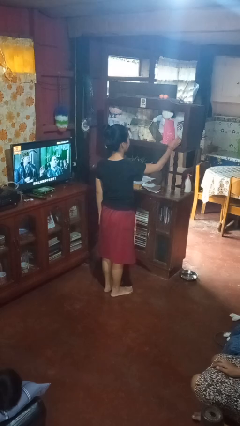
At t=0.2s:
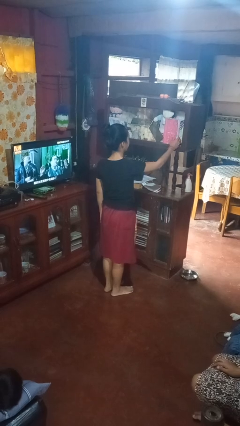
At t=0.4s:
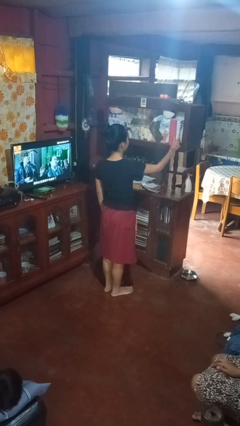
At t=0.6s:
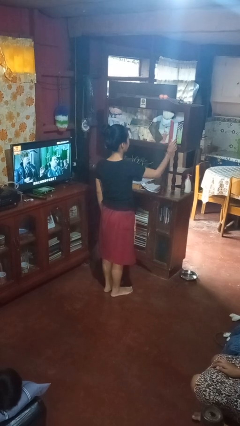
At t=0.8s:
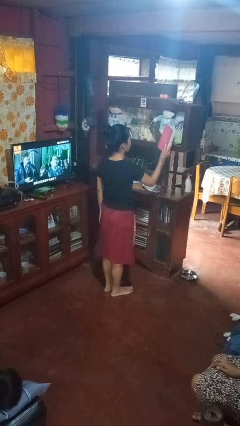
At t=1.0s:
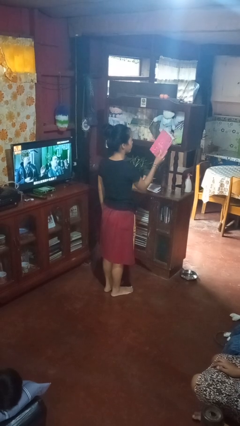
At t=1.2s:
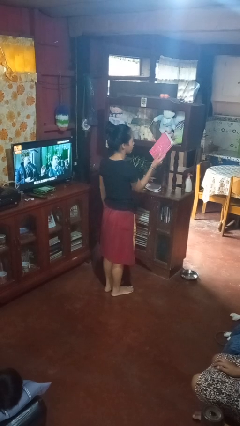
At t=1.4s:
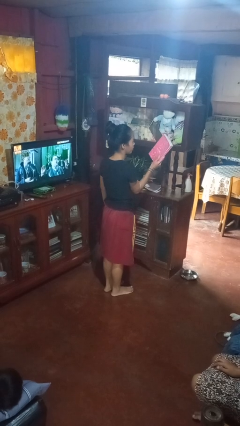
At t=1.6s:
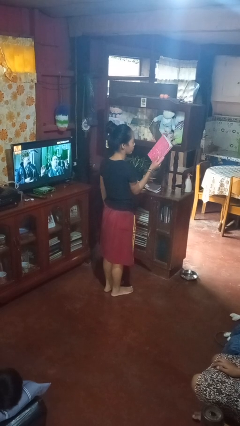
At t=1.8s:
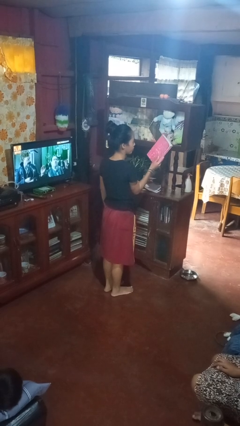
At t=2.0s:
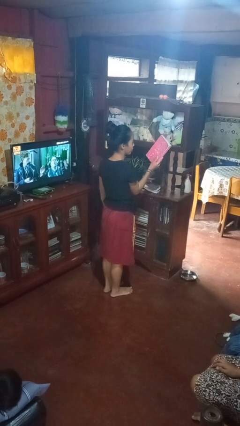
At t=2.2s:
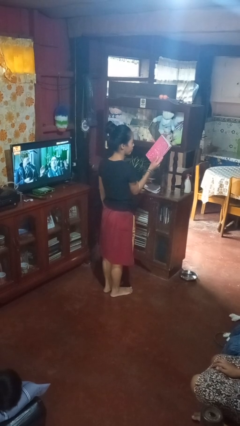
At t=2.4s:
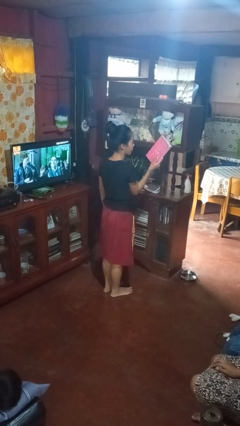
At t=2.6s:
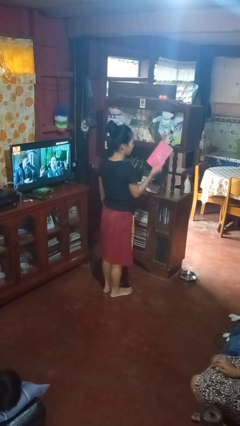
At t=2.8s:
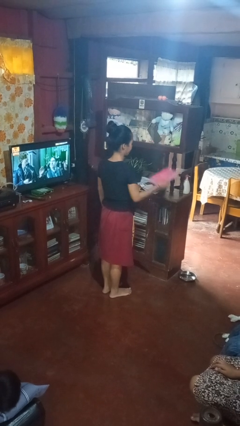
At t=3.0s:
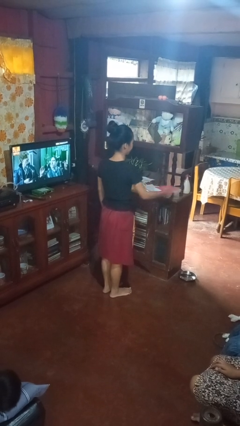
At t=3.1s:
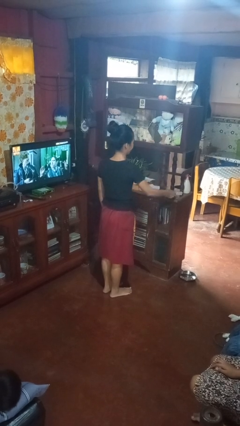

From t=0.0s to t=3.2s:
person picks up object from shelf

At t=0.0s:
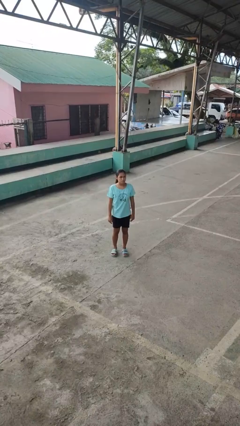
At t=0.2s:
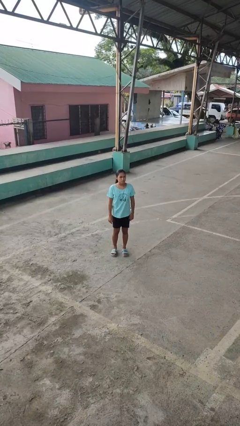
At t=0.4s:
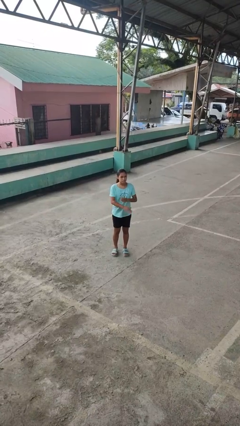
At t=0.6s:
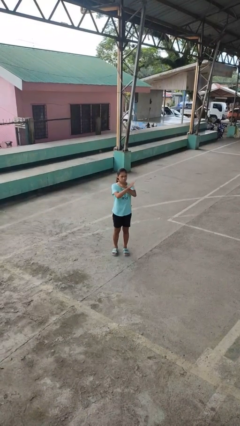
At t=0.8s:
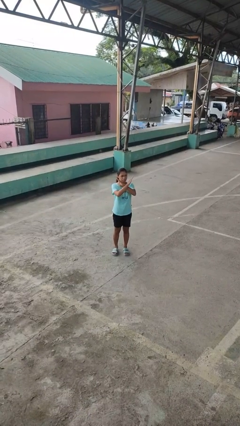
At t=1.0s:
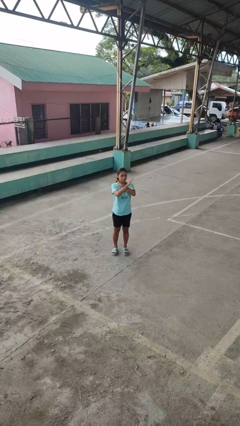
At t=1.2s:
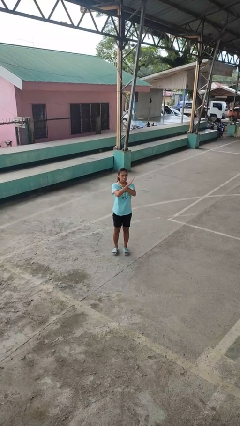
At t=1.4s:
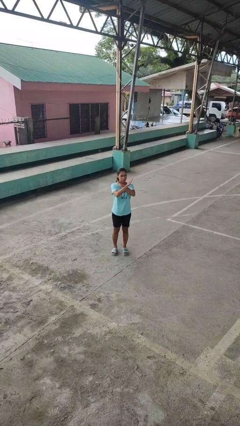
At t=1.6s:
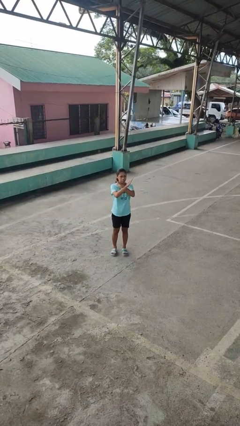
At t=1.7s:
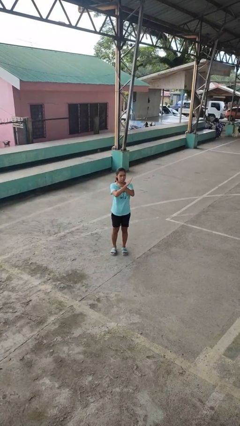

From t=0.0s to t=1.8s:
person gestures arms x

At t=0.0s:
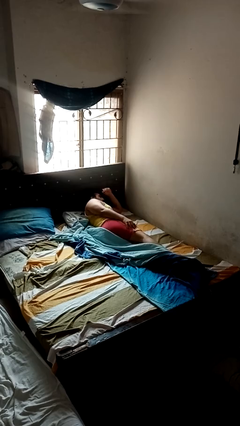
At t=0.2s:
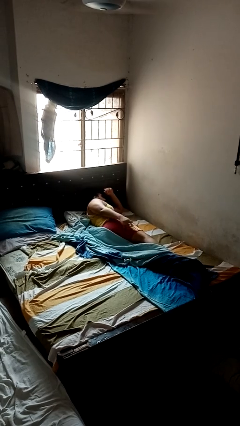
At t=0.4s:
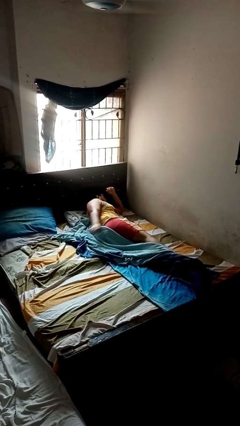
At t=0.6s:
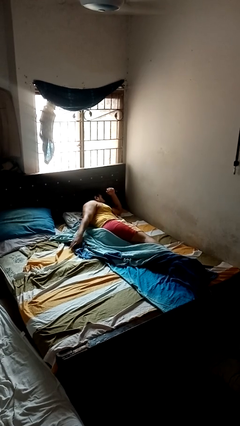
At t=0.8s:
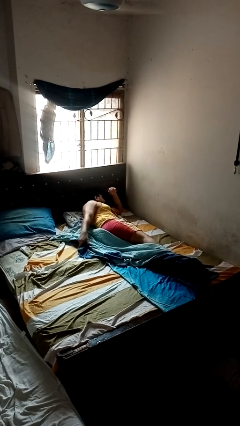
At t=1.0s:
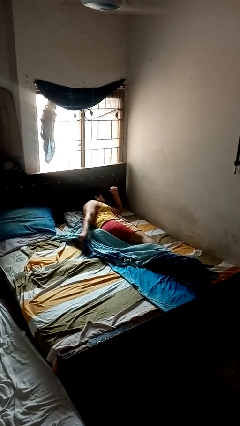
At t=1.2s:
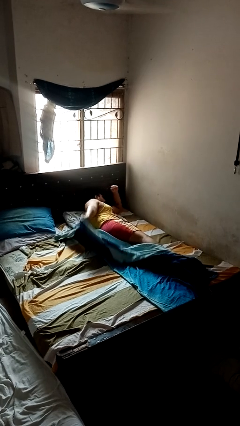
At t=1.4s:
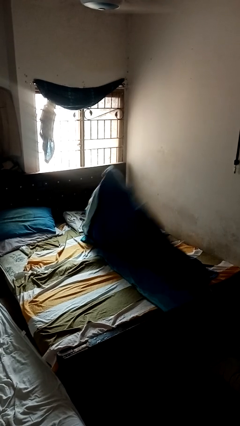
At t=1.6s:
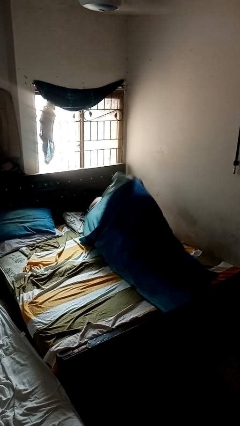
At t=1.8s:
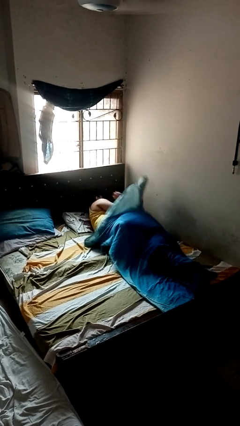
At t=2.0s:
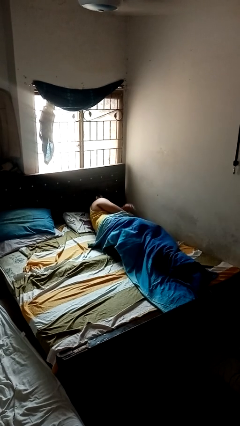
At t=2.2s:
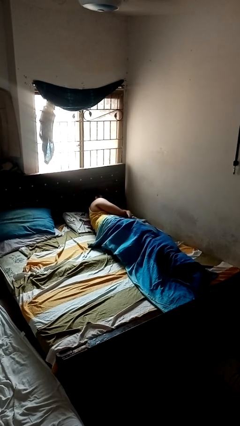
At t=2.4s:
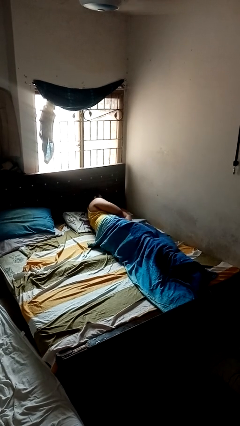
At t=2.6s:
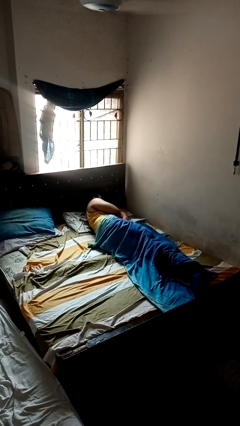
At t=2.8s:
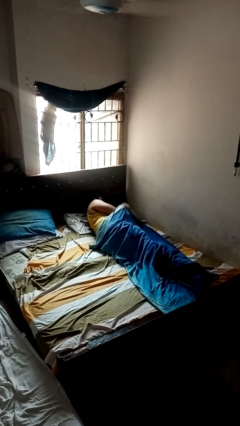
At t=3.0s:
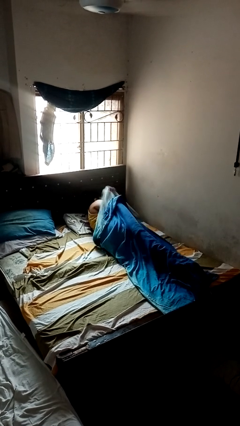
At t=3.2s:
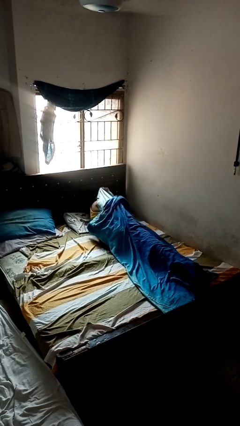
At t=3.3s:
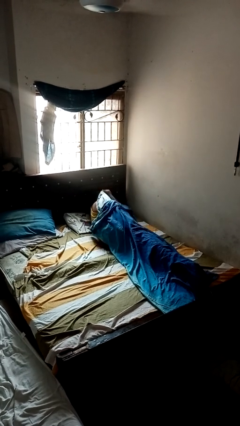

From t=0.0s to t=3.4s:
person covers with blanket

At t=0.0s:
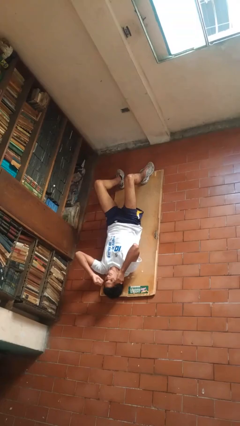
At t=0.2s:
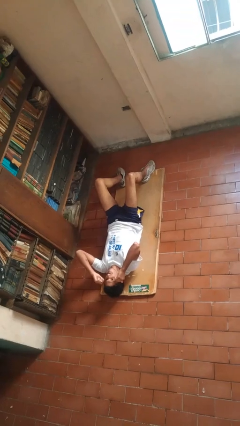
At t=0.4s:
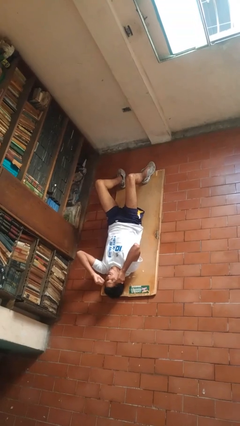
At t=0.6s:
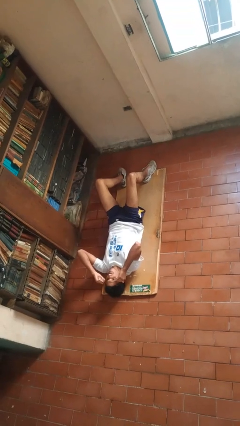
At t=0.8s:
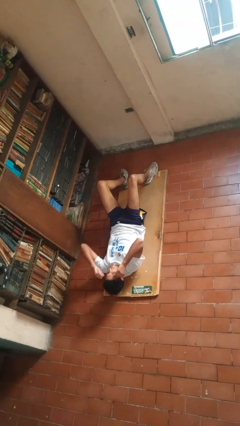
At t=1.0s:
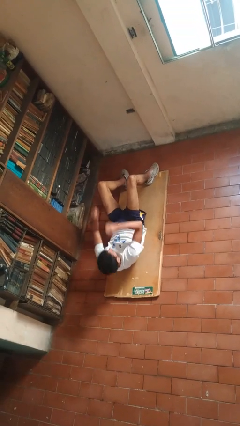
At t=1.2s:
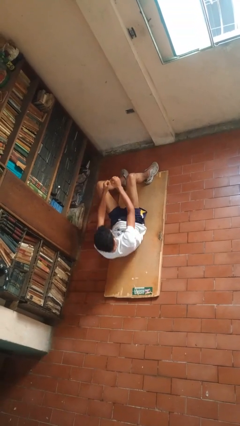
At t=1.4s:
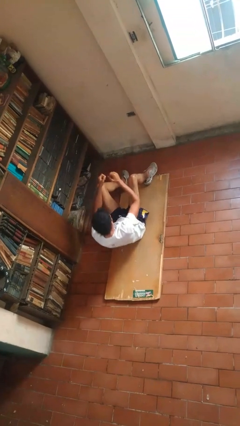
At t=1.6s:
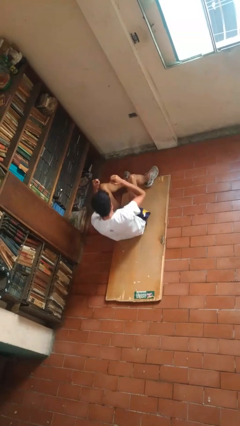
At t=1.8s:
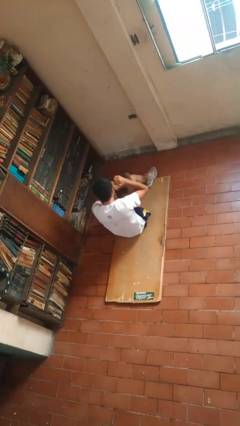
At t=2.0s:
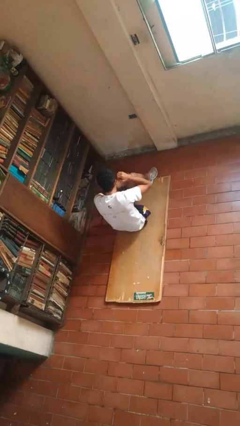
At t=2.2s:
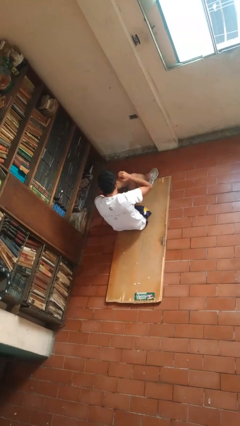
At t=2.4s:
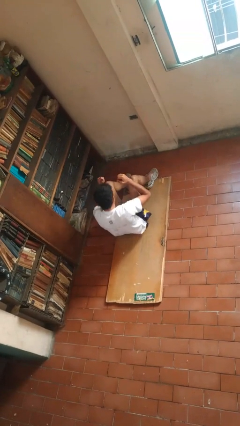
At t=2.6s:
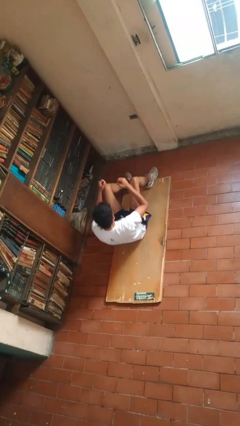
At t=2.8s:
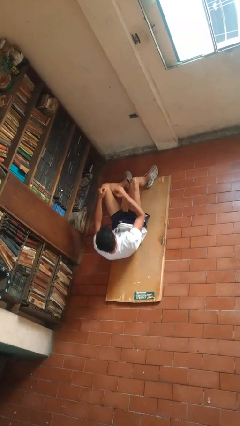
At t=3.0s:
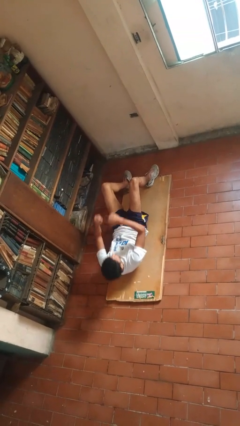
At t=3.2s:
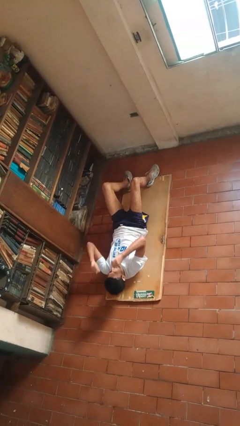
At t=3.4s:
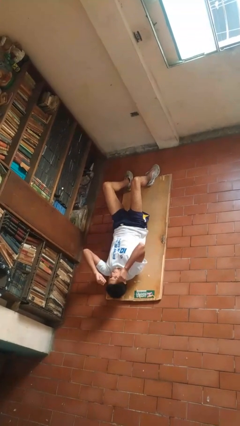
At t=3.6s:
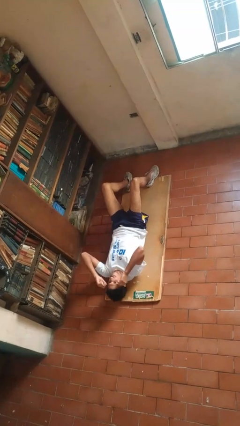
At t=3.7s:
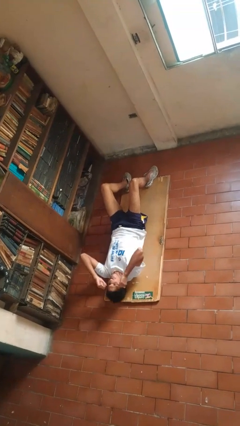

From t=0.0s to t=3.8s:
person exercises with situp

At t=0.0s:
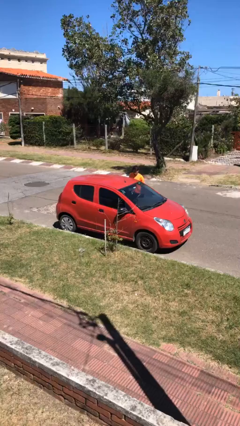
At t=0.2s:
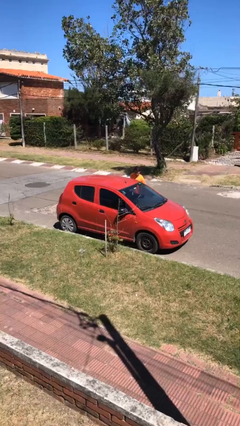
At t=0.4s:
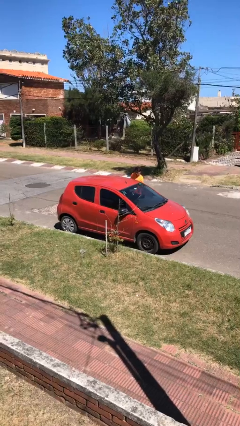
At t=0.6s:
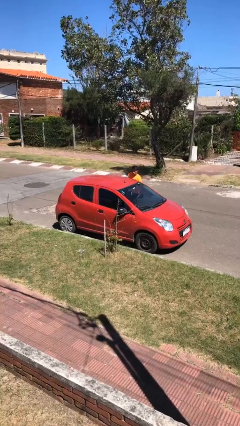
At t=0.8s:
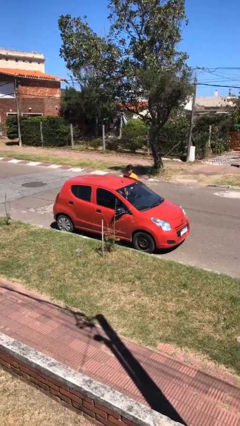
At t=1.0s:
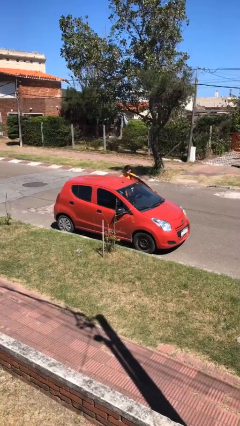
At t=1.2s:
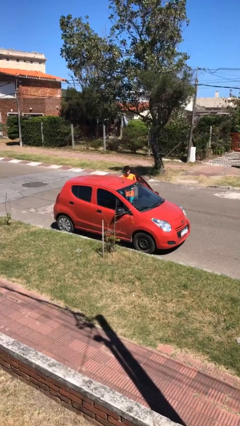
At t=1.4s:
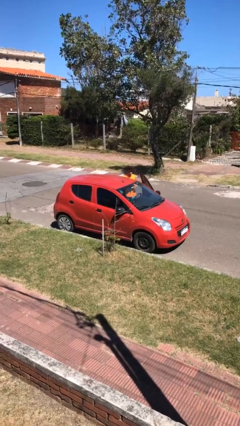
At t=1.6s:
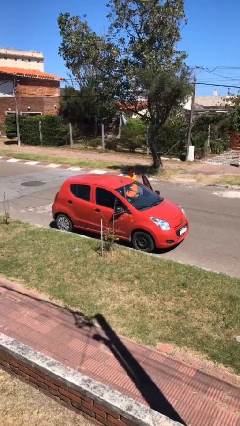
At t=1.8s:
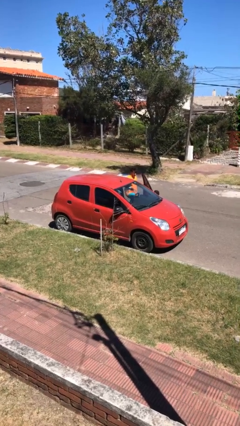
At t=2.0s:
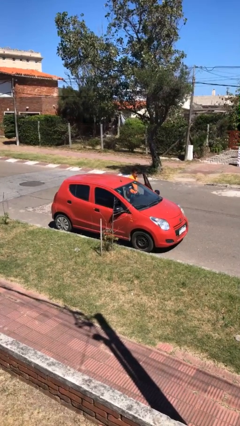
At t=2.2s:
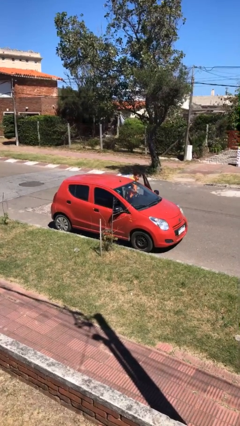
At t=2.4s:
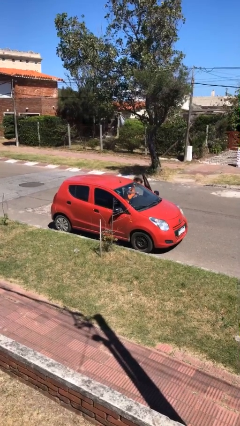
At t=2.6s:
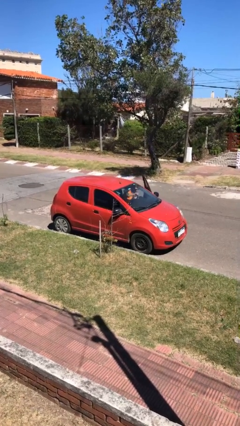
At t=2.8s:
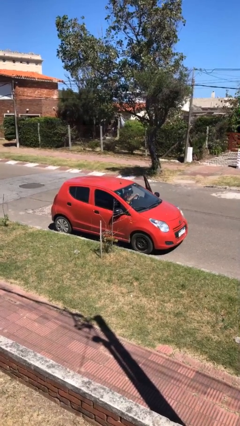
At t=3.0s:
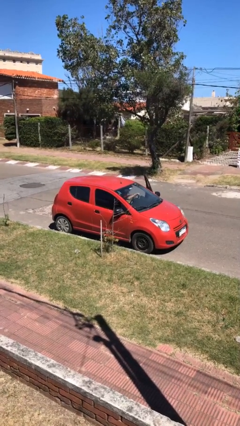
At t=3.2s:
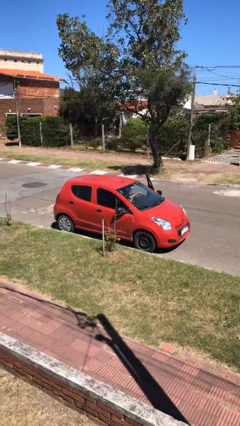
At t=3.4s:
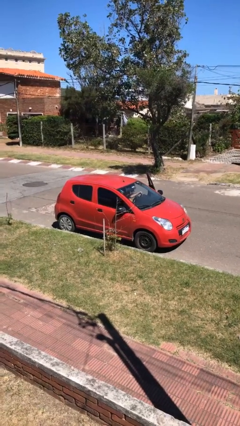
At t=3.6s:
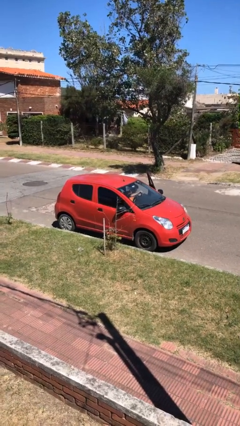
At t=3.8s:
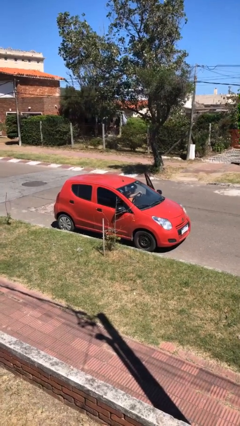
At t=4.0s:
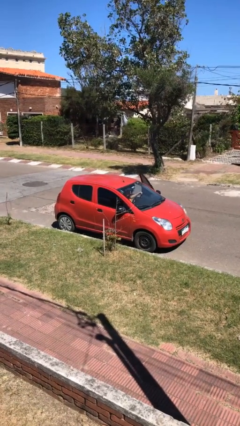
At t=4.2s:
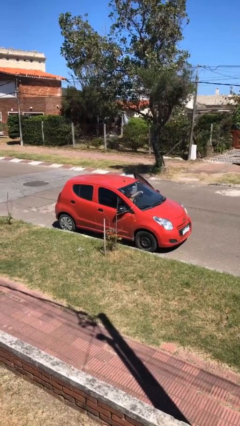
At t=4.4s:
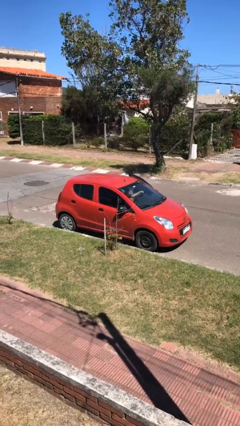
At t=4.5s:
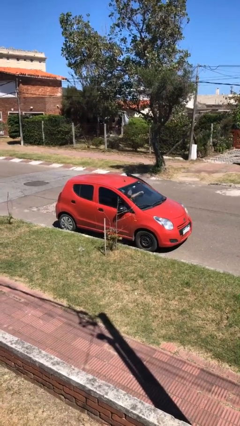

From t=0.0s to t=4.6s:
car picks up person

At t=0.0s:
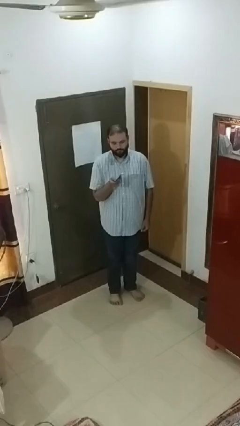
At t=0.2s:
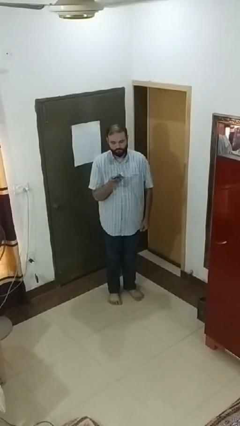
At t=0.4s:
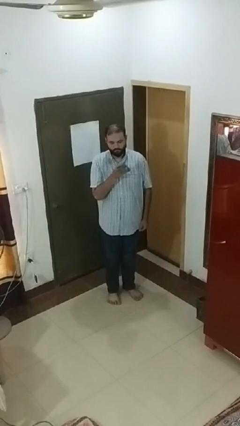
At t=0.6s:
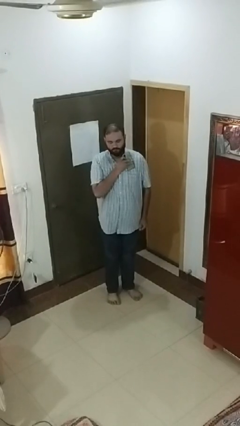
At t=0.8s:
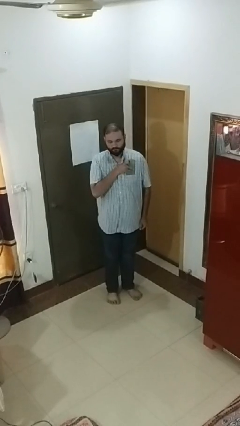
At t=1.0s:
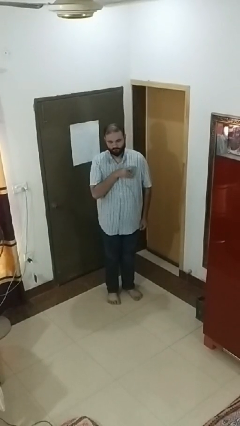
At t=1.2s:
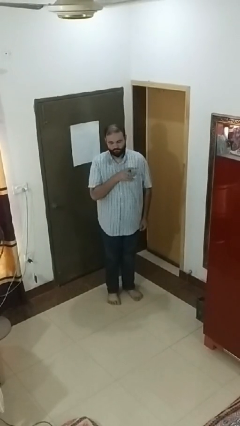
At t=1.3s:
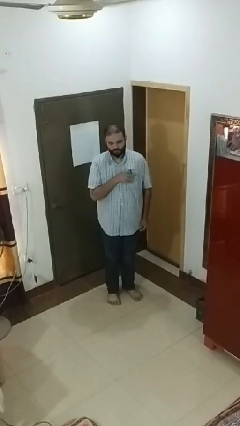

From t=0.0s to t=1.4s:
person puts phone into pocket
